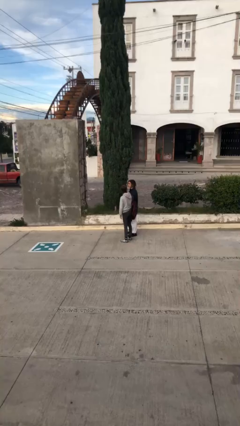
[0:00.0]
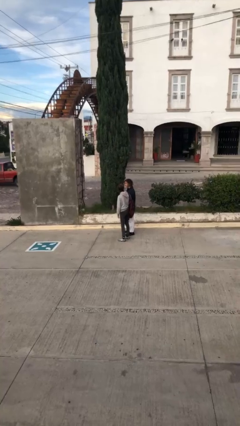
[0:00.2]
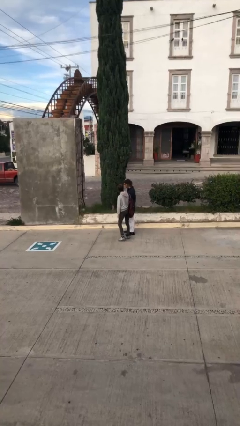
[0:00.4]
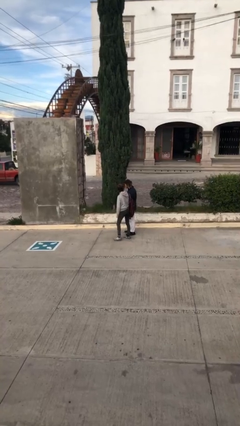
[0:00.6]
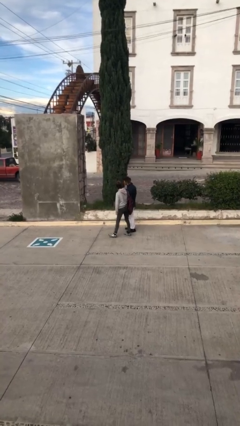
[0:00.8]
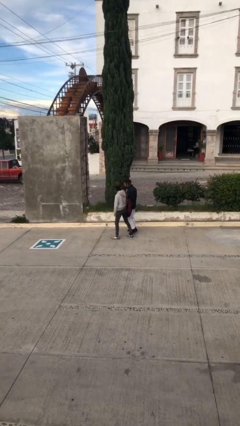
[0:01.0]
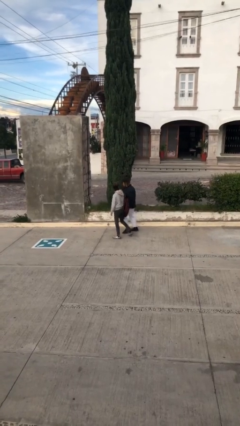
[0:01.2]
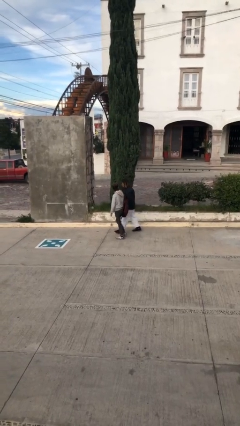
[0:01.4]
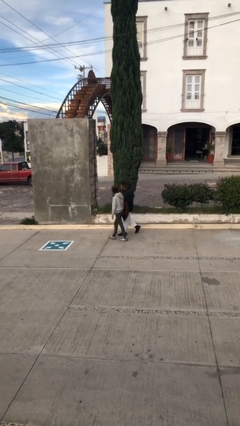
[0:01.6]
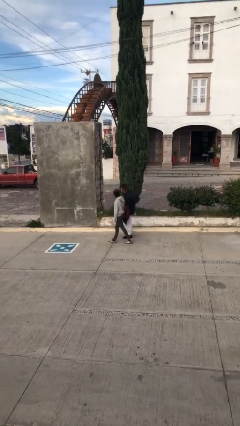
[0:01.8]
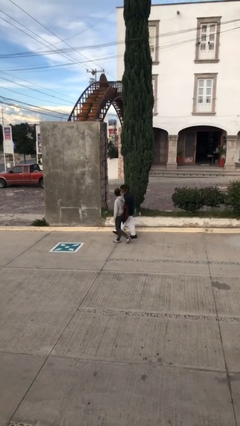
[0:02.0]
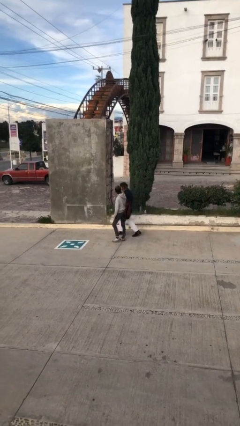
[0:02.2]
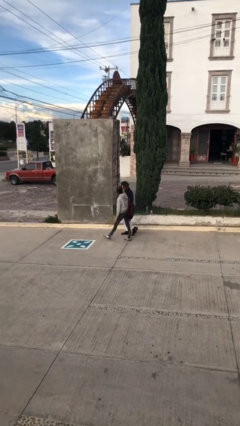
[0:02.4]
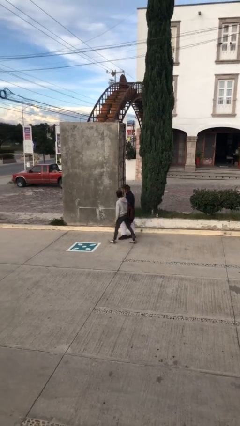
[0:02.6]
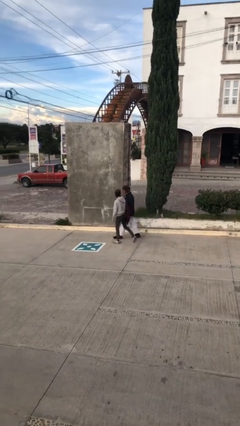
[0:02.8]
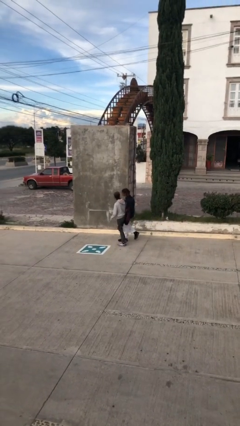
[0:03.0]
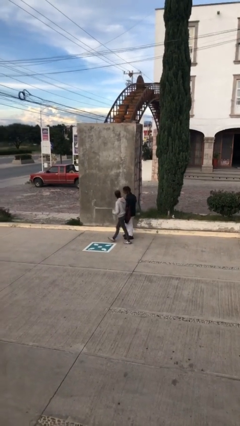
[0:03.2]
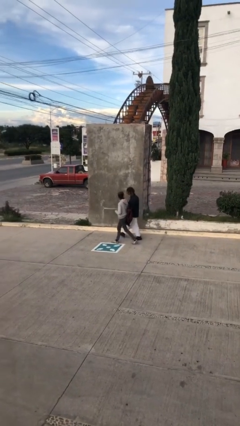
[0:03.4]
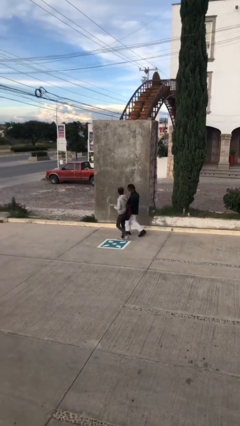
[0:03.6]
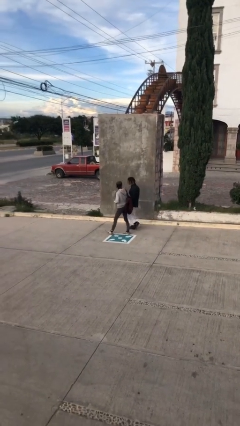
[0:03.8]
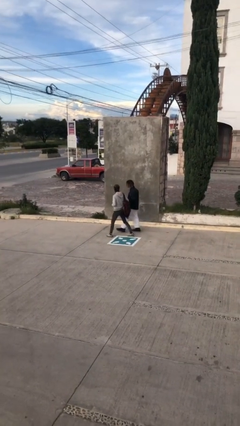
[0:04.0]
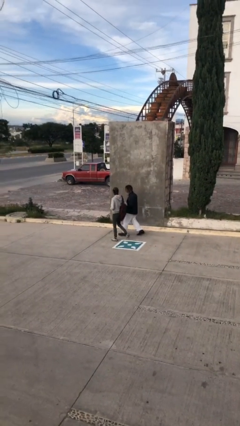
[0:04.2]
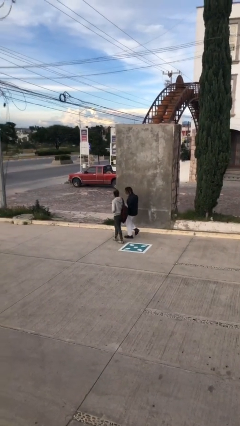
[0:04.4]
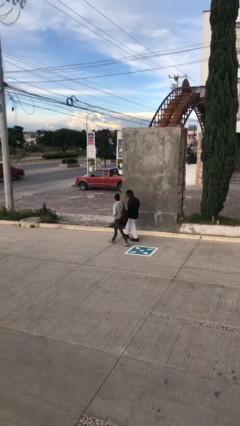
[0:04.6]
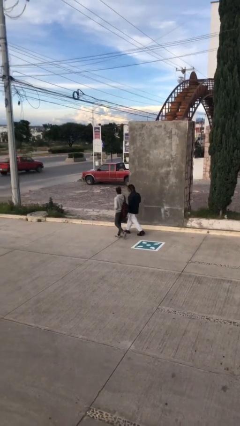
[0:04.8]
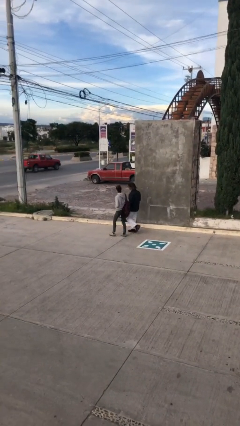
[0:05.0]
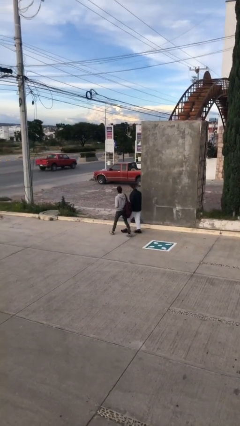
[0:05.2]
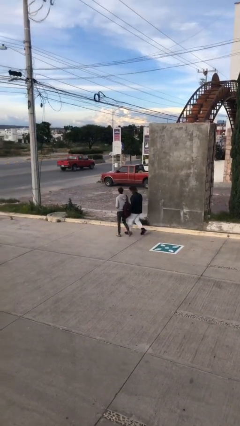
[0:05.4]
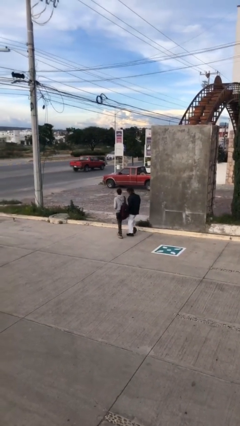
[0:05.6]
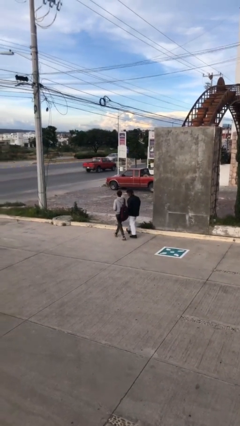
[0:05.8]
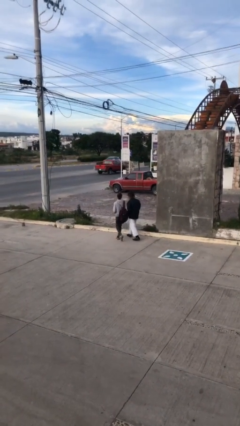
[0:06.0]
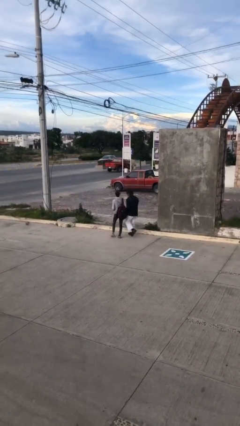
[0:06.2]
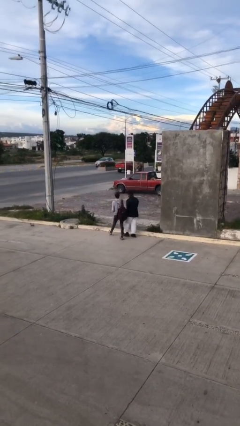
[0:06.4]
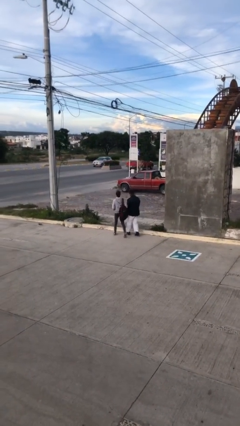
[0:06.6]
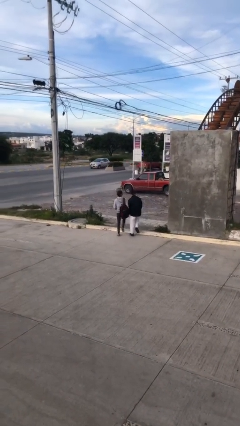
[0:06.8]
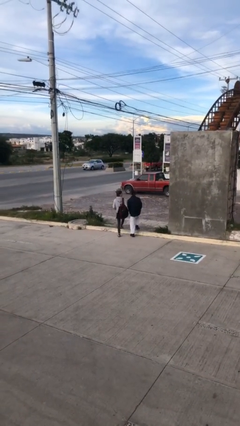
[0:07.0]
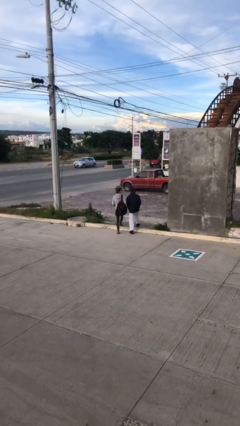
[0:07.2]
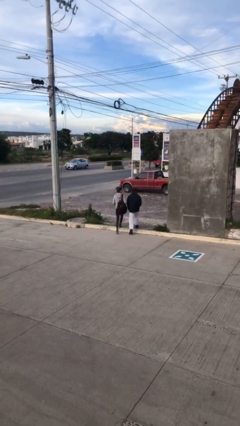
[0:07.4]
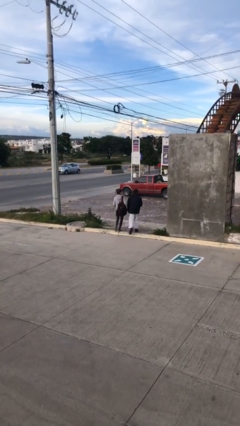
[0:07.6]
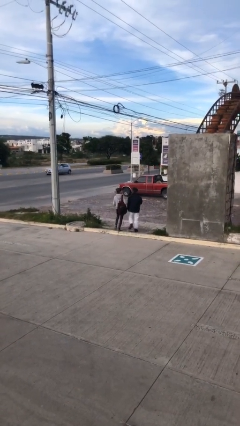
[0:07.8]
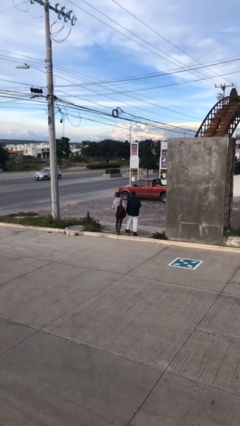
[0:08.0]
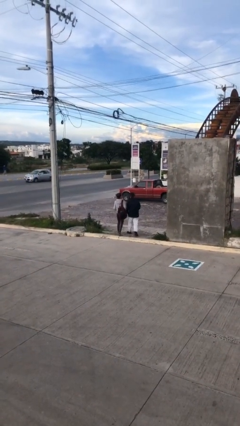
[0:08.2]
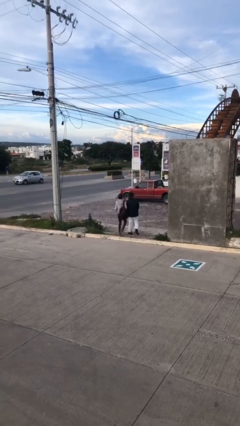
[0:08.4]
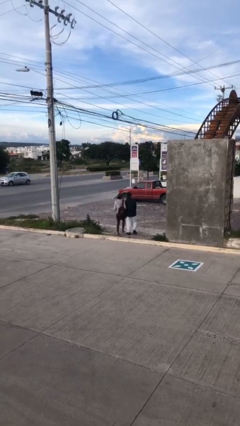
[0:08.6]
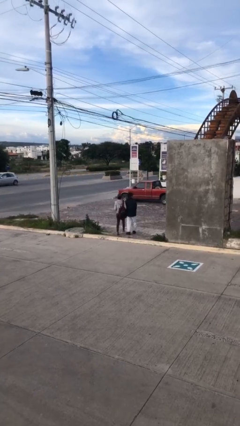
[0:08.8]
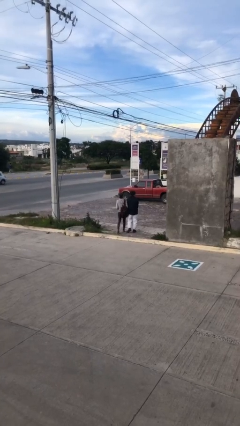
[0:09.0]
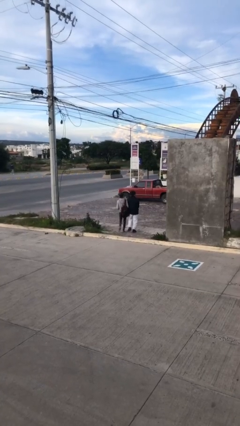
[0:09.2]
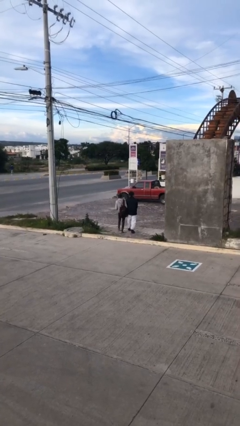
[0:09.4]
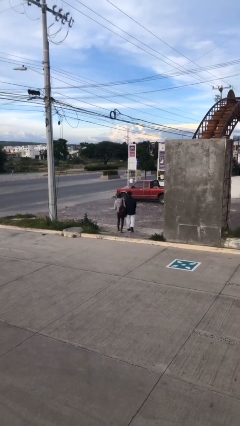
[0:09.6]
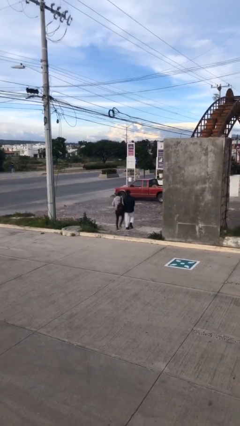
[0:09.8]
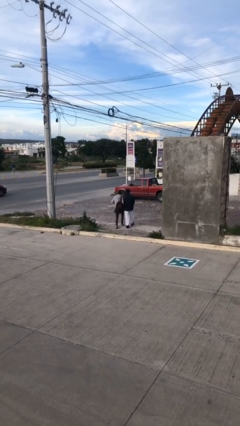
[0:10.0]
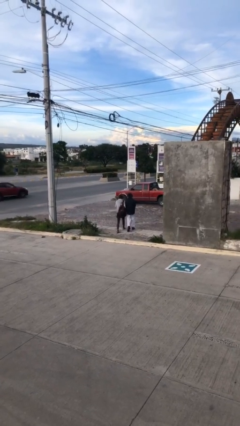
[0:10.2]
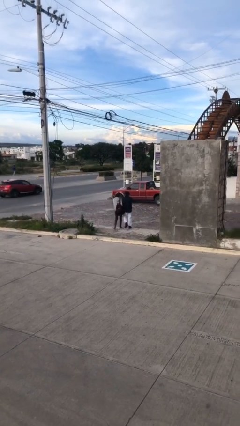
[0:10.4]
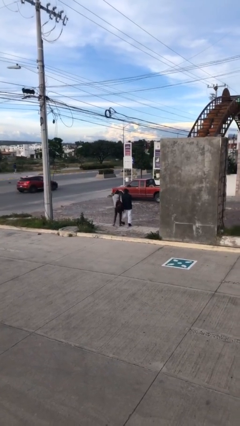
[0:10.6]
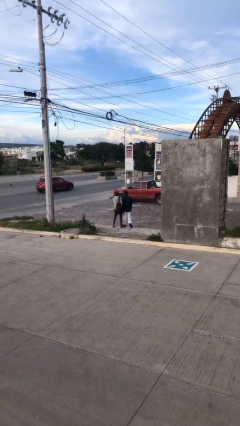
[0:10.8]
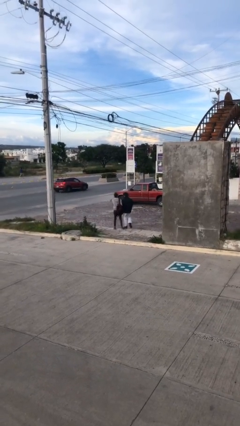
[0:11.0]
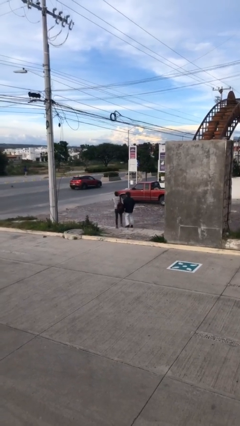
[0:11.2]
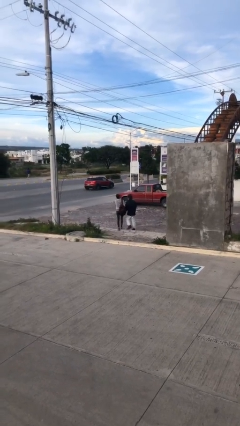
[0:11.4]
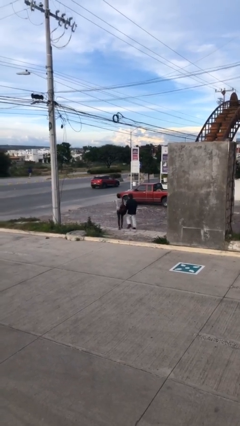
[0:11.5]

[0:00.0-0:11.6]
person talks to person

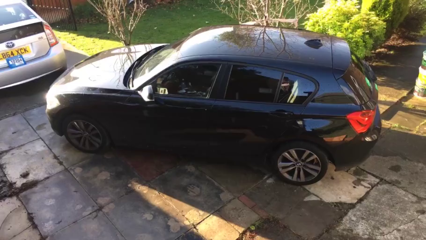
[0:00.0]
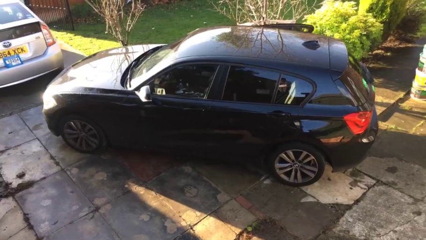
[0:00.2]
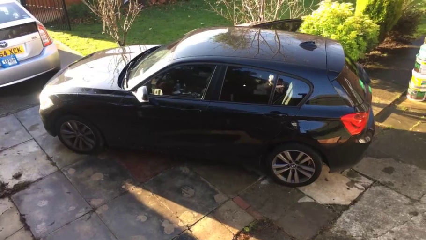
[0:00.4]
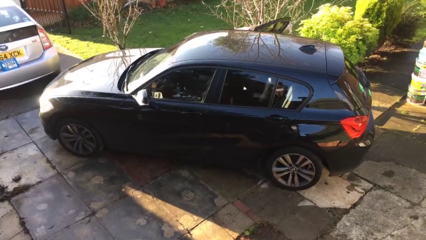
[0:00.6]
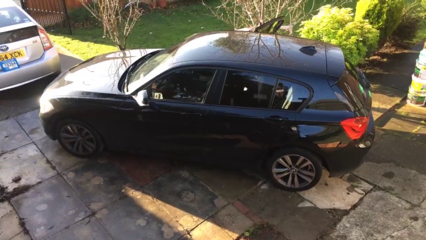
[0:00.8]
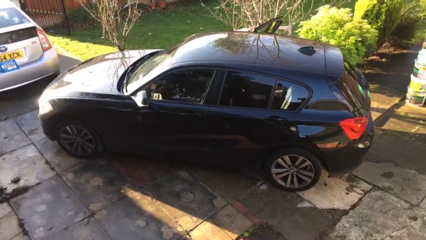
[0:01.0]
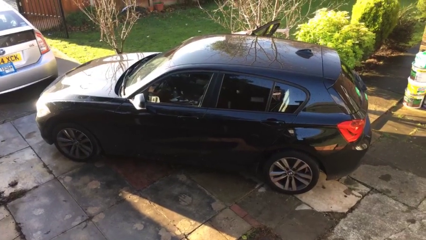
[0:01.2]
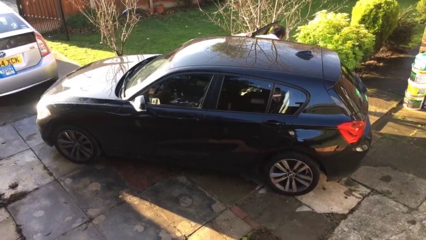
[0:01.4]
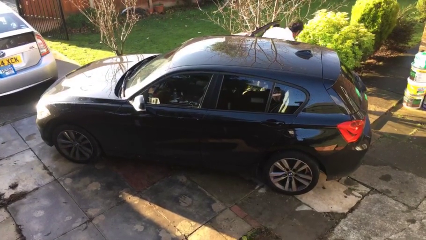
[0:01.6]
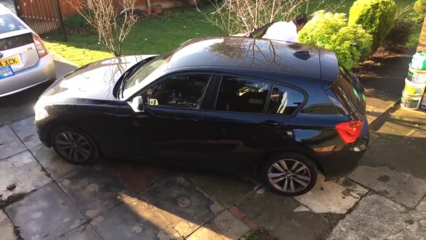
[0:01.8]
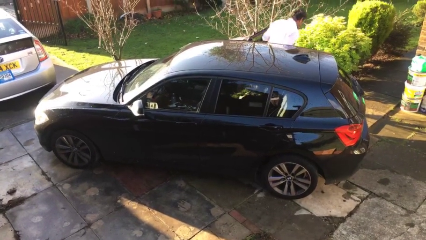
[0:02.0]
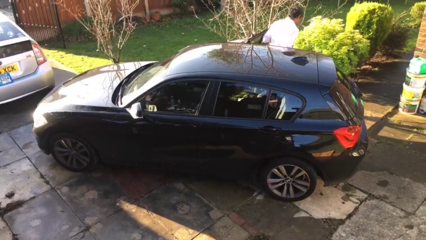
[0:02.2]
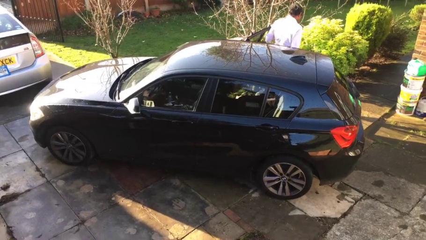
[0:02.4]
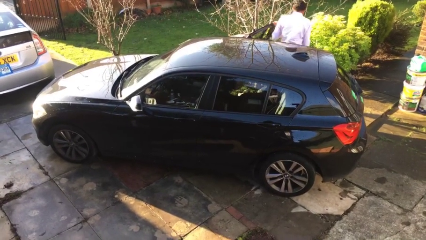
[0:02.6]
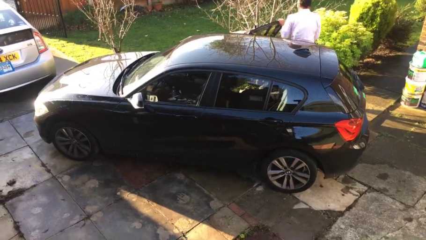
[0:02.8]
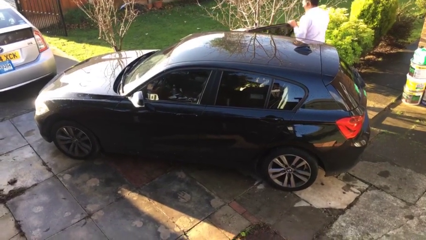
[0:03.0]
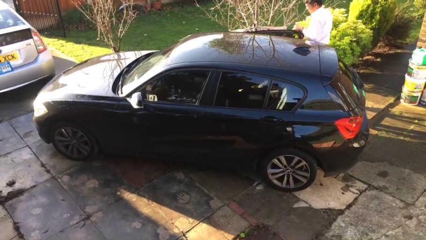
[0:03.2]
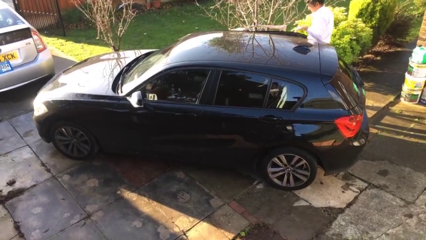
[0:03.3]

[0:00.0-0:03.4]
car drops off person

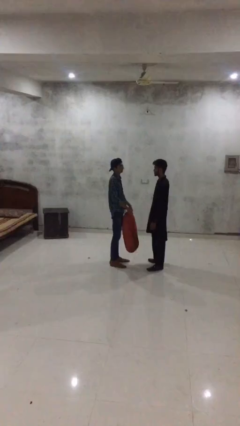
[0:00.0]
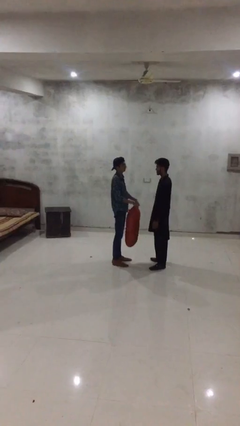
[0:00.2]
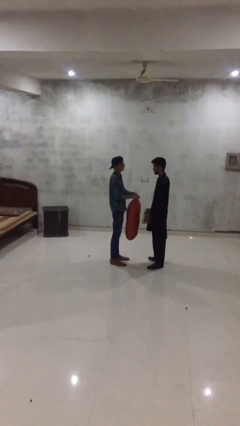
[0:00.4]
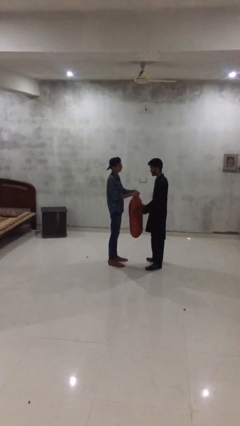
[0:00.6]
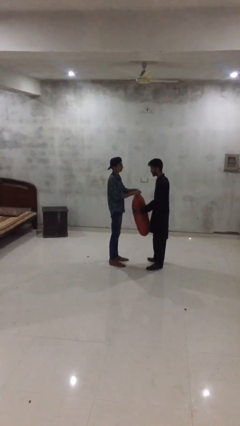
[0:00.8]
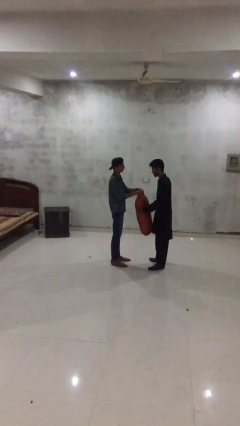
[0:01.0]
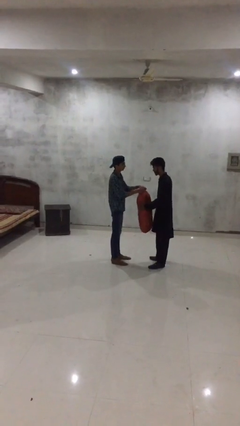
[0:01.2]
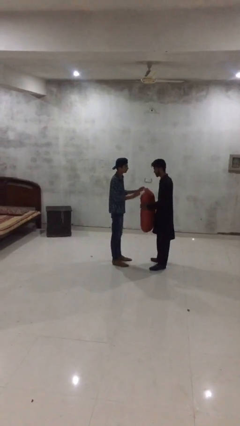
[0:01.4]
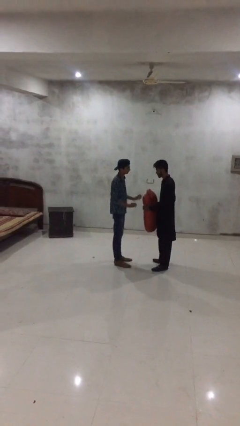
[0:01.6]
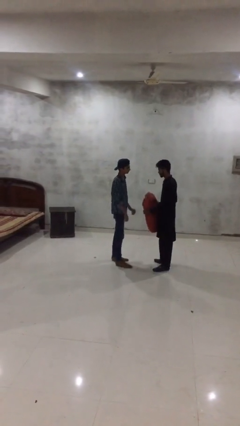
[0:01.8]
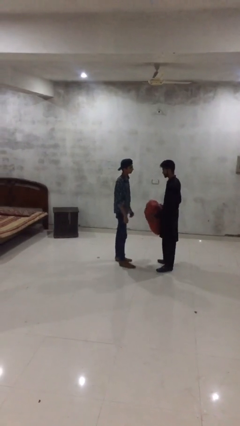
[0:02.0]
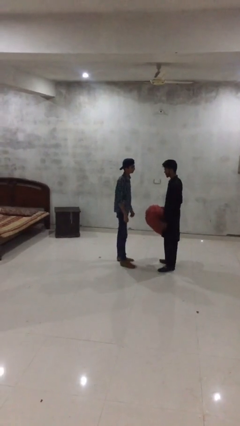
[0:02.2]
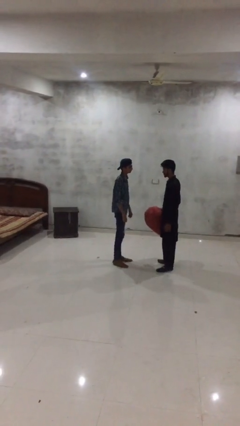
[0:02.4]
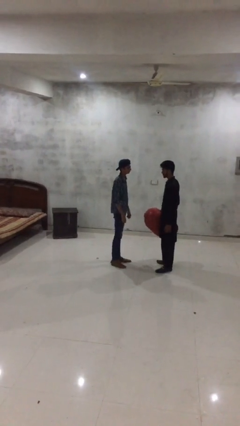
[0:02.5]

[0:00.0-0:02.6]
person transfers object to person

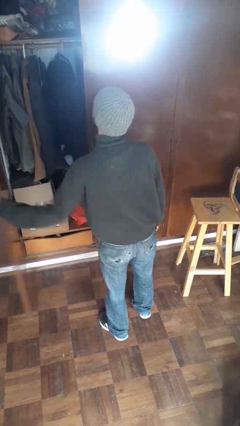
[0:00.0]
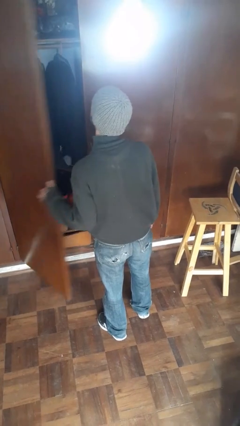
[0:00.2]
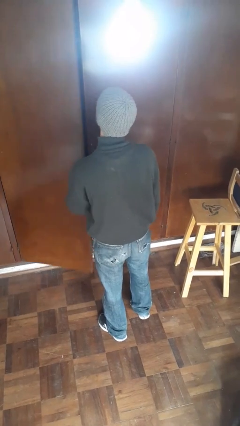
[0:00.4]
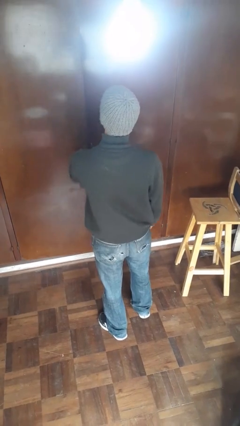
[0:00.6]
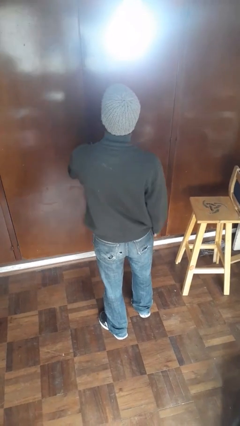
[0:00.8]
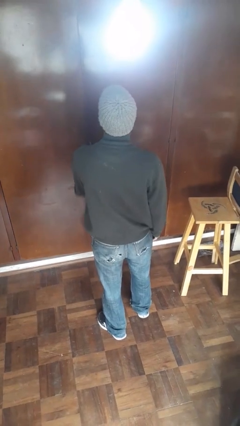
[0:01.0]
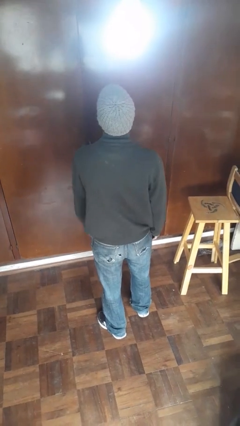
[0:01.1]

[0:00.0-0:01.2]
person closes closet door
